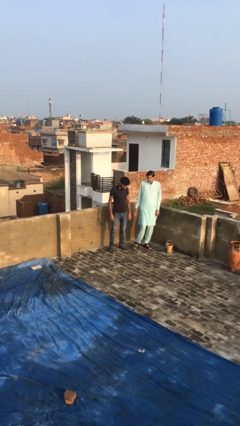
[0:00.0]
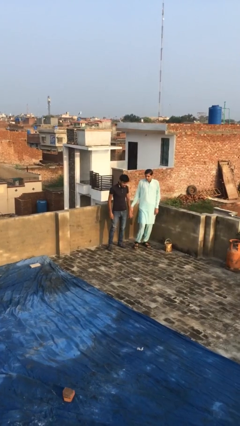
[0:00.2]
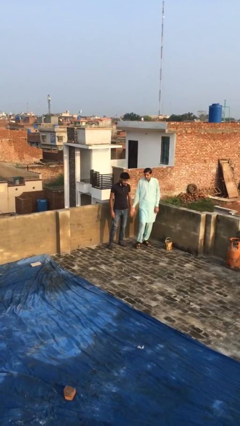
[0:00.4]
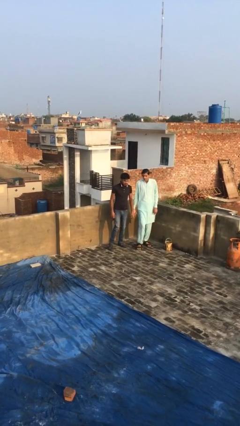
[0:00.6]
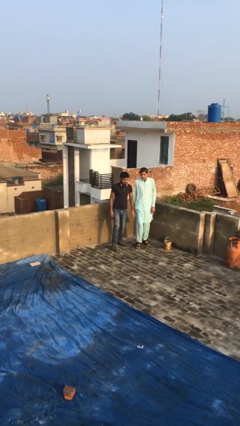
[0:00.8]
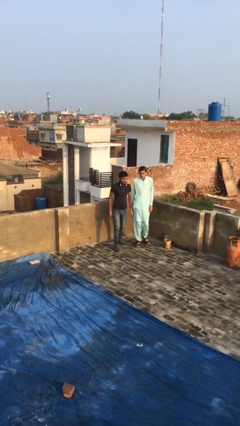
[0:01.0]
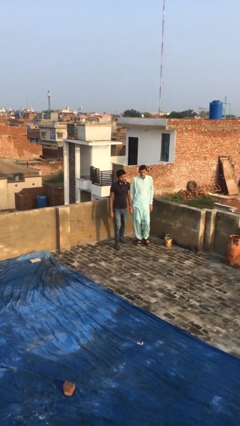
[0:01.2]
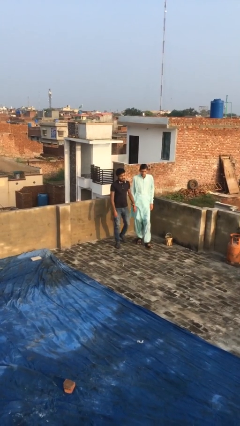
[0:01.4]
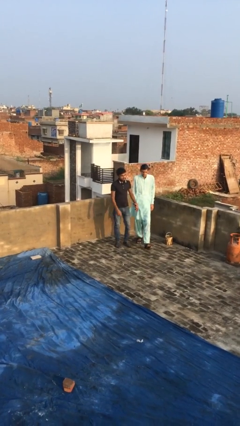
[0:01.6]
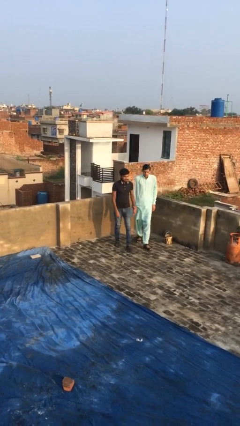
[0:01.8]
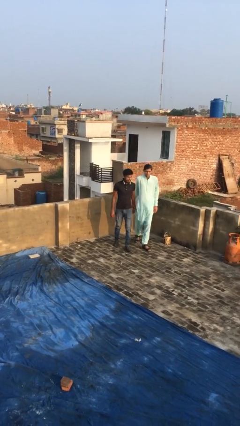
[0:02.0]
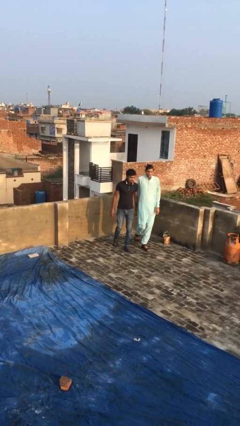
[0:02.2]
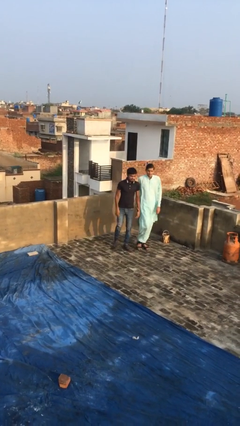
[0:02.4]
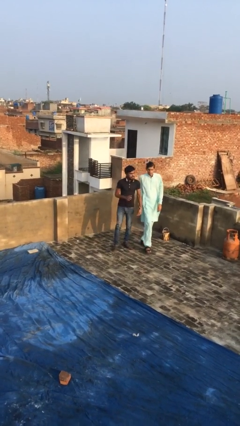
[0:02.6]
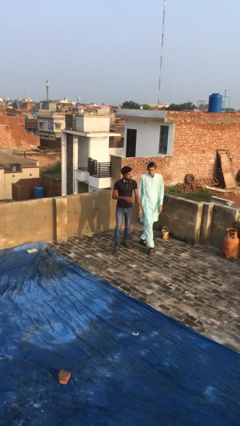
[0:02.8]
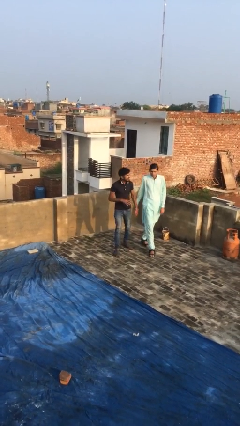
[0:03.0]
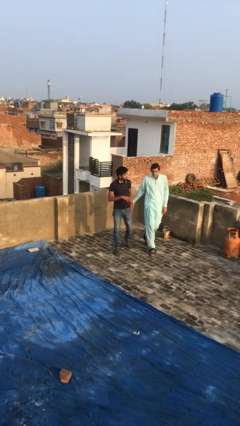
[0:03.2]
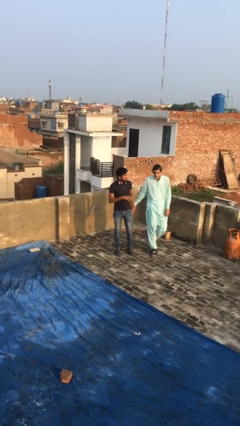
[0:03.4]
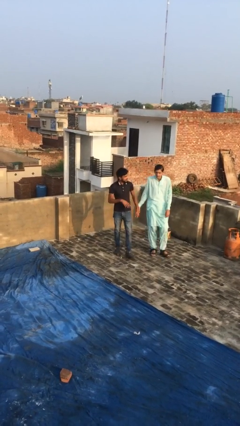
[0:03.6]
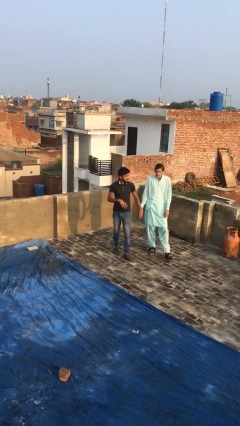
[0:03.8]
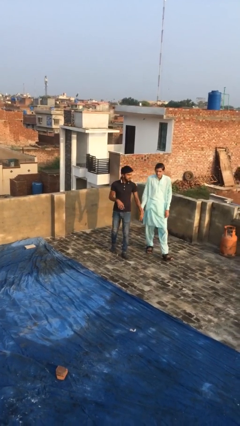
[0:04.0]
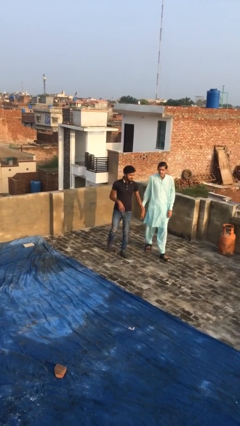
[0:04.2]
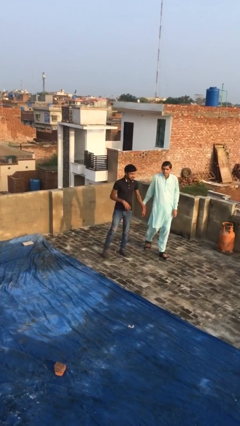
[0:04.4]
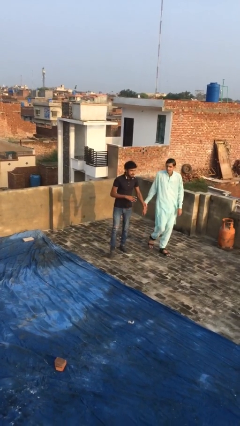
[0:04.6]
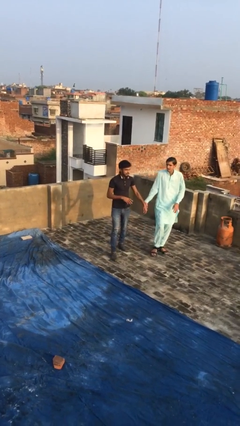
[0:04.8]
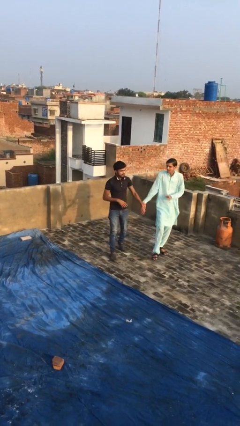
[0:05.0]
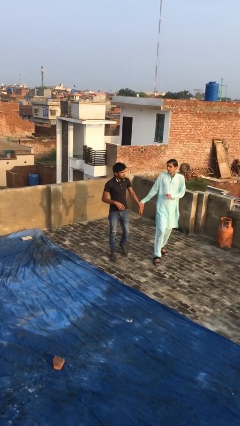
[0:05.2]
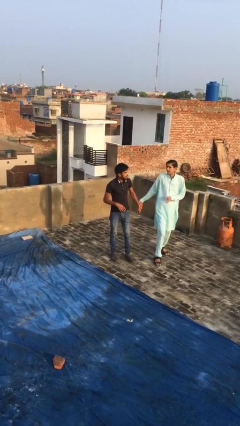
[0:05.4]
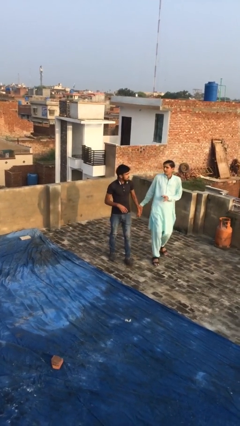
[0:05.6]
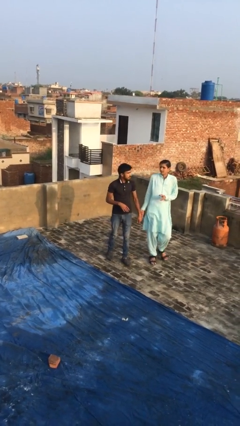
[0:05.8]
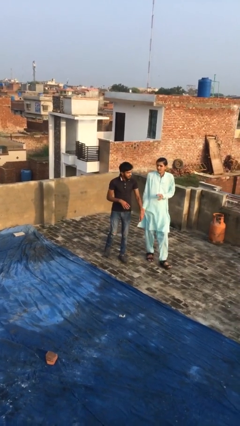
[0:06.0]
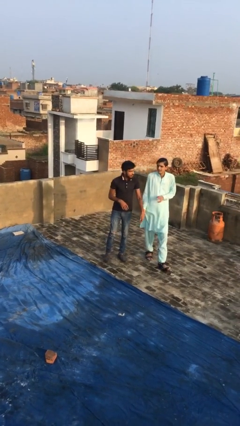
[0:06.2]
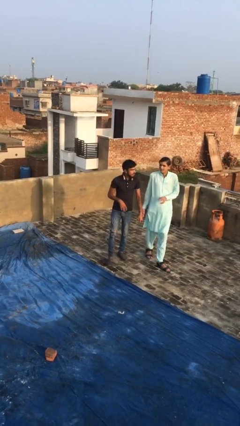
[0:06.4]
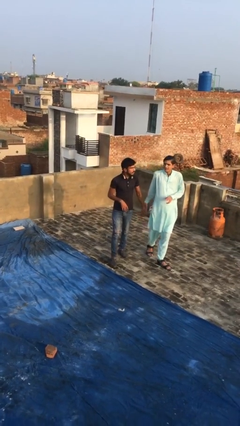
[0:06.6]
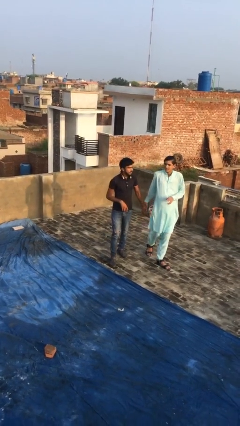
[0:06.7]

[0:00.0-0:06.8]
person holds hand

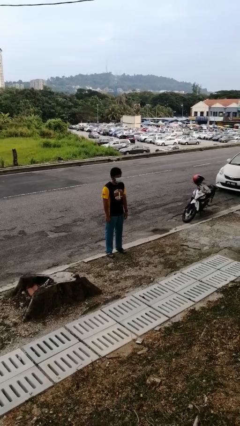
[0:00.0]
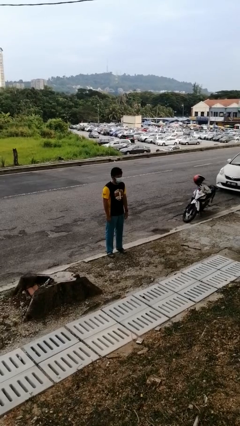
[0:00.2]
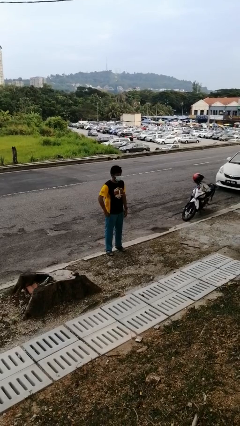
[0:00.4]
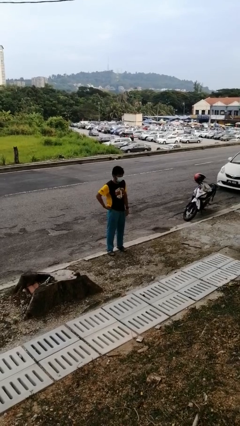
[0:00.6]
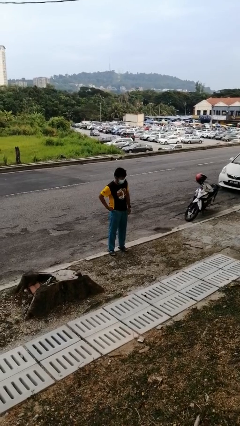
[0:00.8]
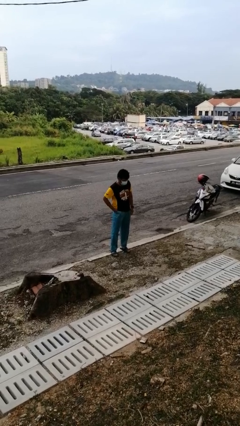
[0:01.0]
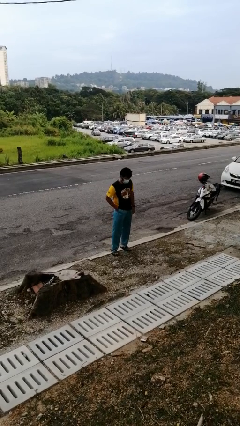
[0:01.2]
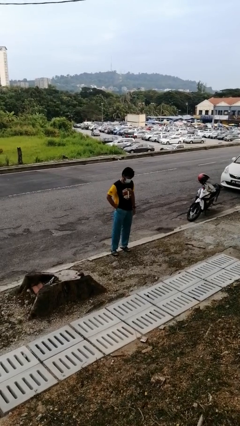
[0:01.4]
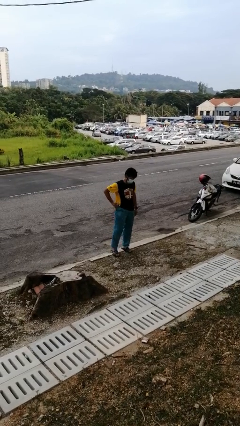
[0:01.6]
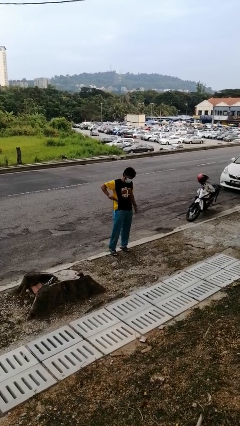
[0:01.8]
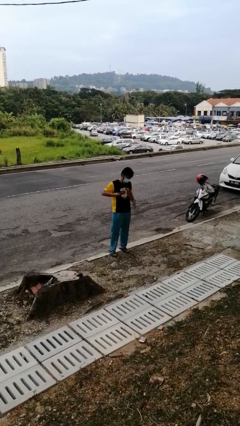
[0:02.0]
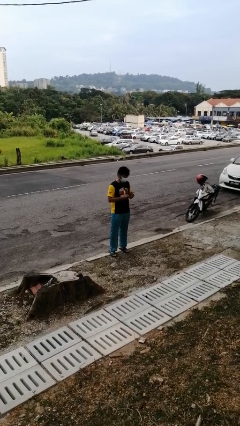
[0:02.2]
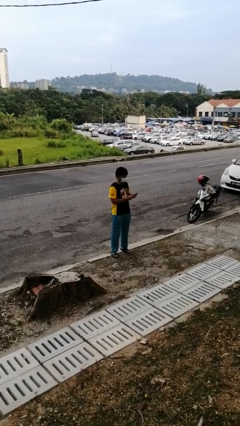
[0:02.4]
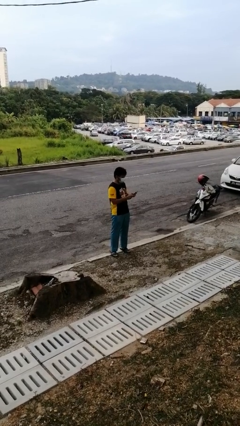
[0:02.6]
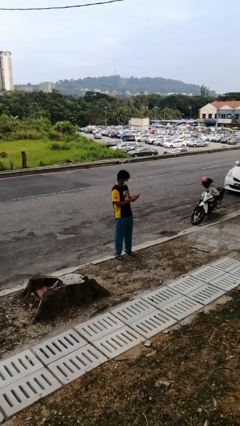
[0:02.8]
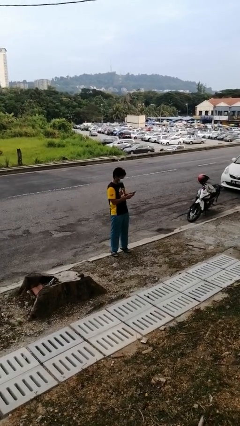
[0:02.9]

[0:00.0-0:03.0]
person takes phone from pocket

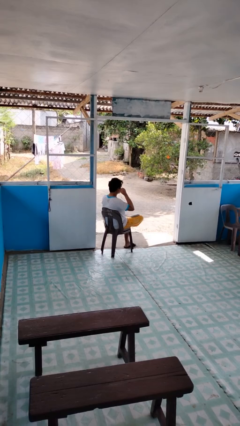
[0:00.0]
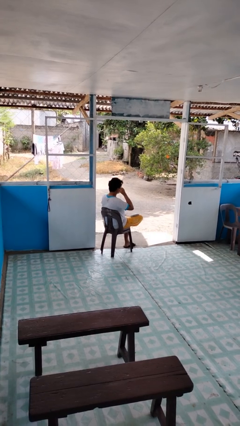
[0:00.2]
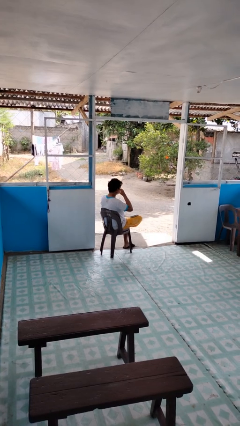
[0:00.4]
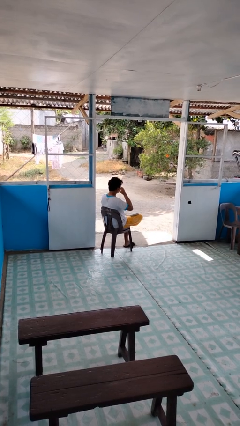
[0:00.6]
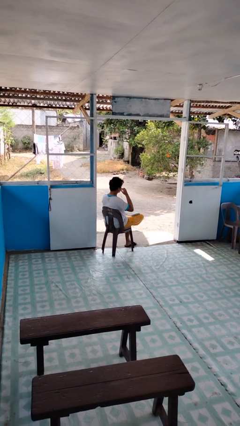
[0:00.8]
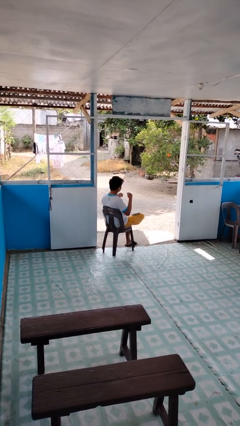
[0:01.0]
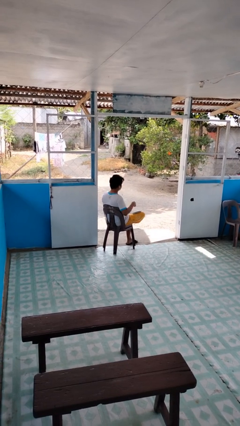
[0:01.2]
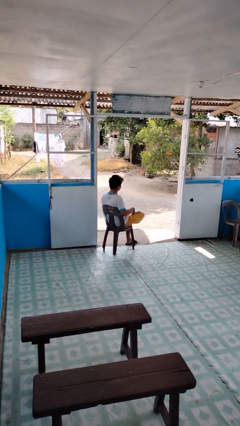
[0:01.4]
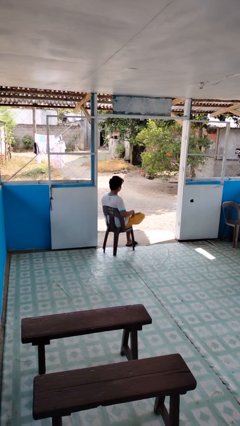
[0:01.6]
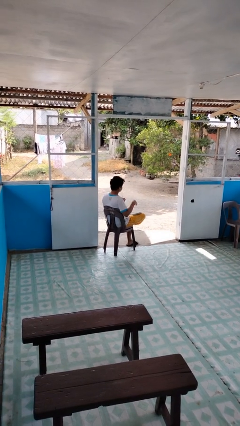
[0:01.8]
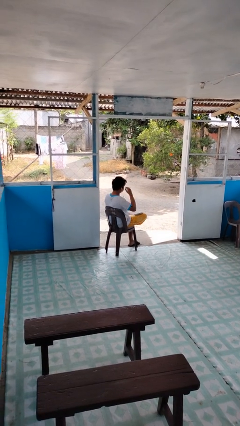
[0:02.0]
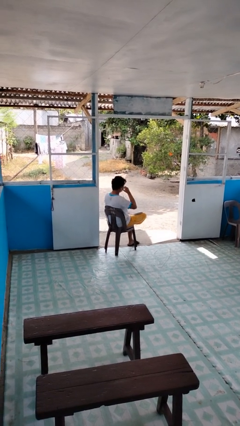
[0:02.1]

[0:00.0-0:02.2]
person puts on headphones

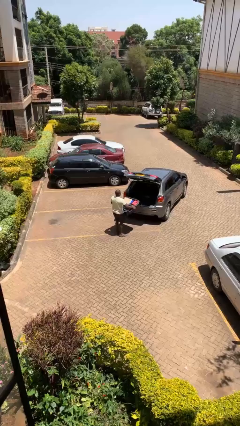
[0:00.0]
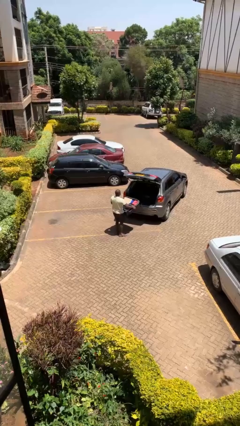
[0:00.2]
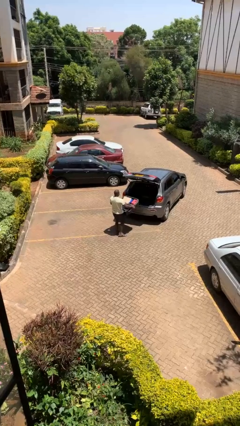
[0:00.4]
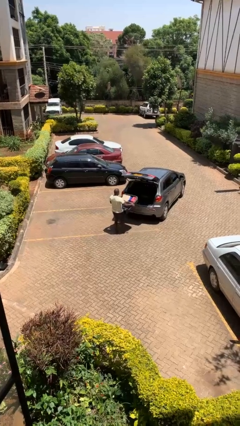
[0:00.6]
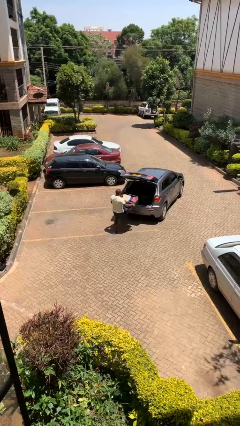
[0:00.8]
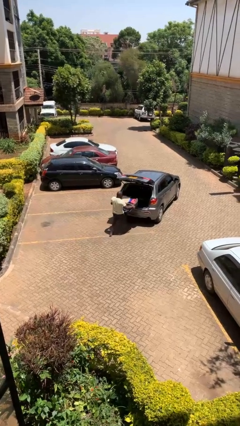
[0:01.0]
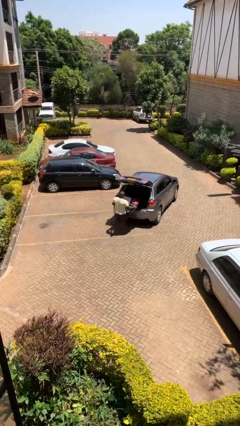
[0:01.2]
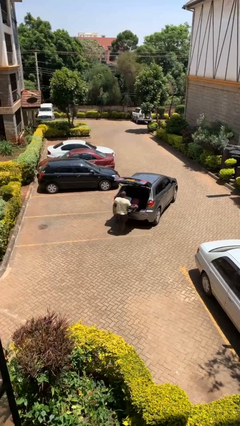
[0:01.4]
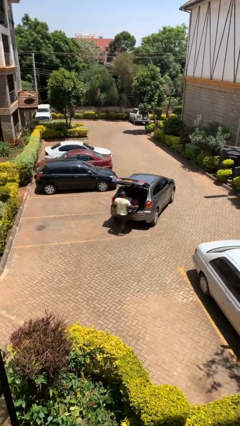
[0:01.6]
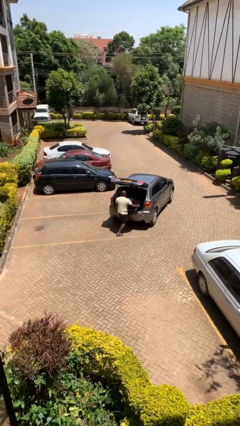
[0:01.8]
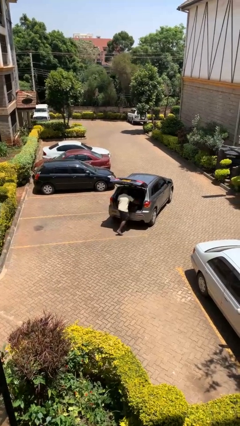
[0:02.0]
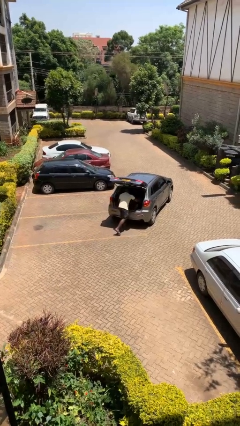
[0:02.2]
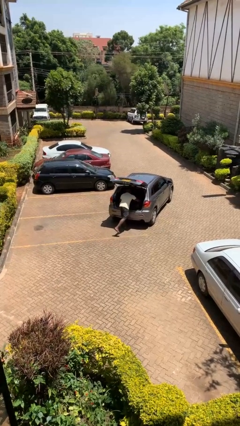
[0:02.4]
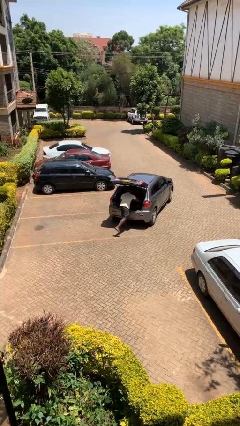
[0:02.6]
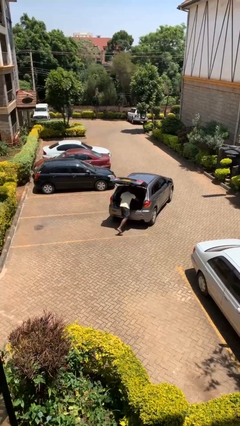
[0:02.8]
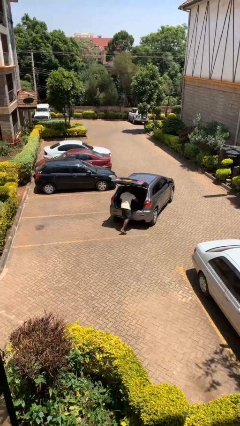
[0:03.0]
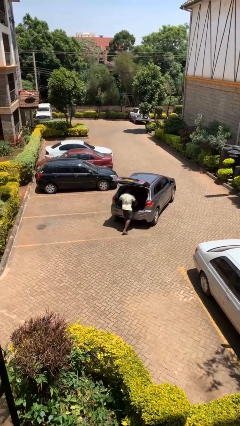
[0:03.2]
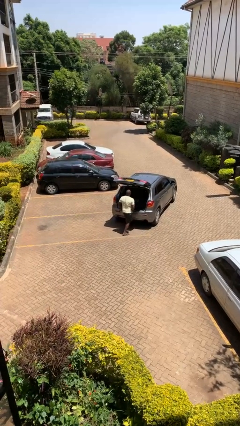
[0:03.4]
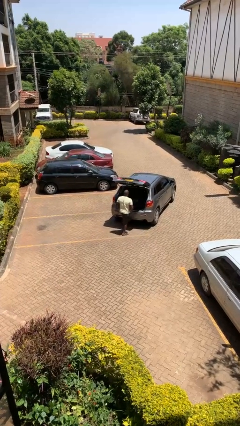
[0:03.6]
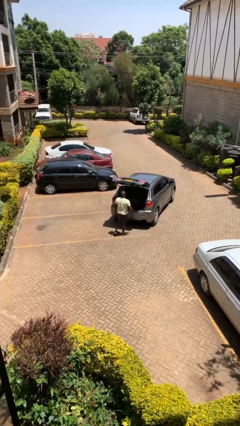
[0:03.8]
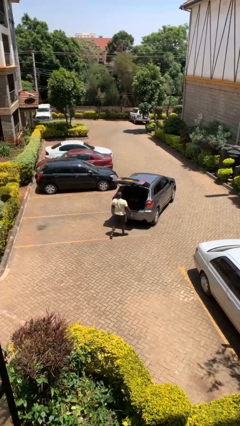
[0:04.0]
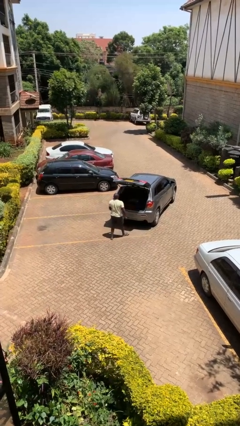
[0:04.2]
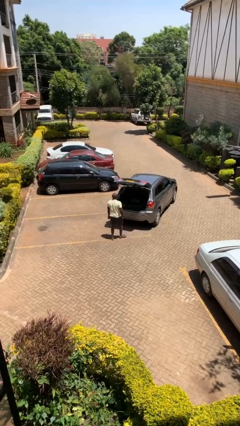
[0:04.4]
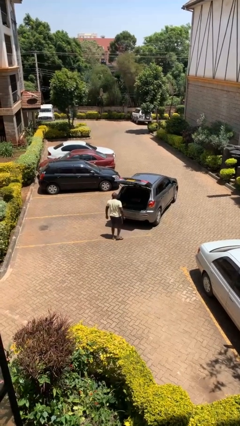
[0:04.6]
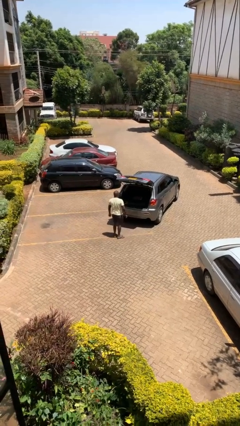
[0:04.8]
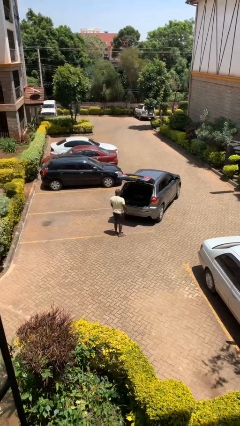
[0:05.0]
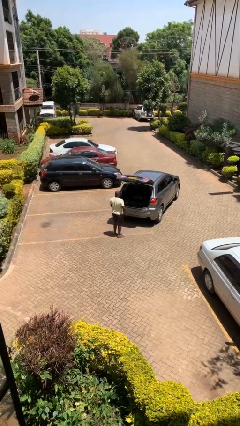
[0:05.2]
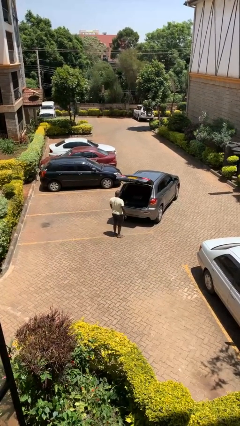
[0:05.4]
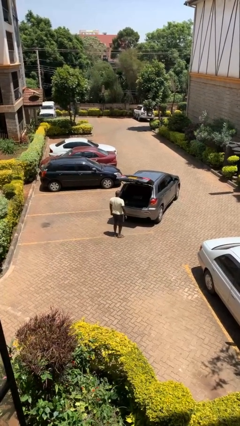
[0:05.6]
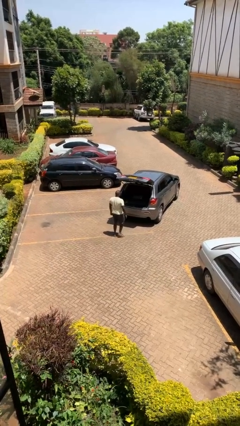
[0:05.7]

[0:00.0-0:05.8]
person loads car
